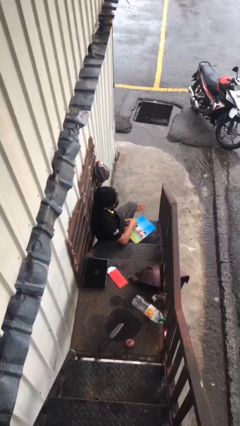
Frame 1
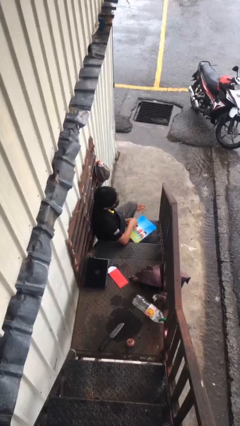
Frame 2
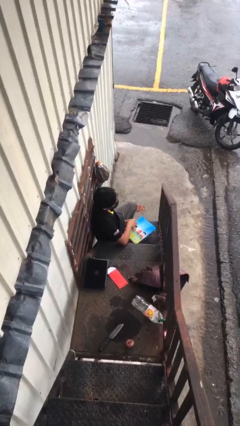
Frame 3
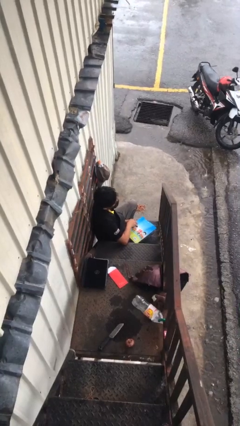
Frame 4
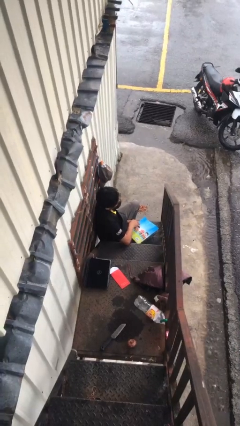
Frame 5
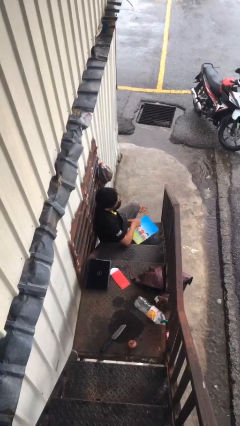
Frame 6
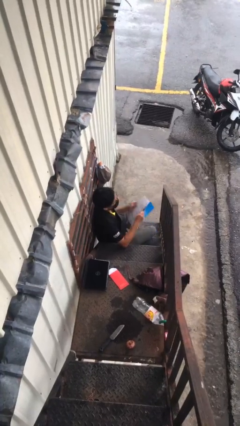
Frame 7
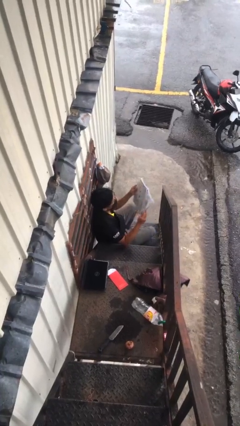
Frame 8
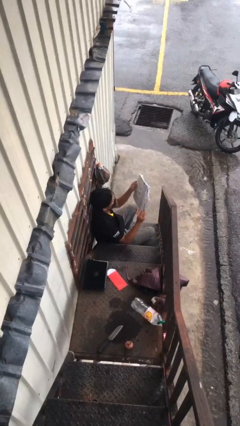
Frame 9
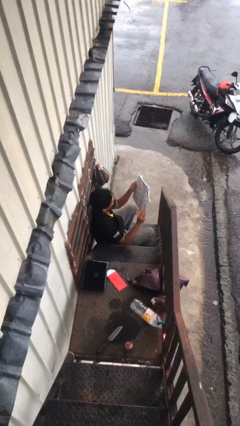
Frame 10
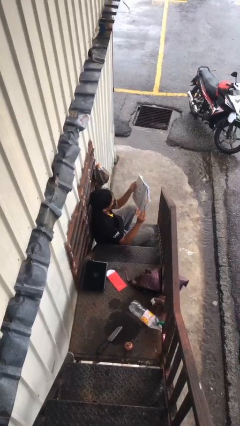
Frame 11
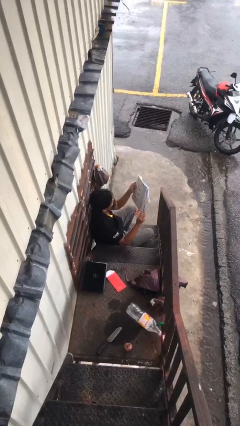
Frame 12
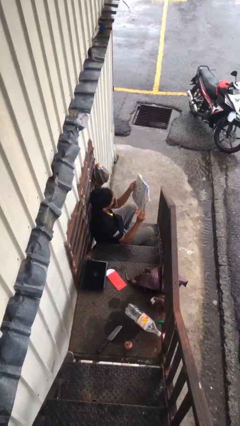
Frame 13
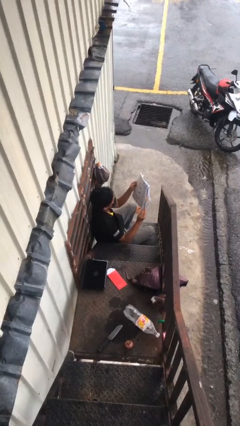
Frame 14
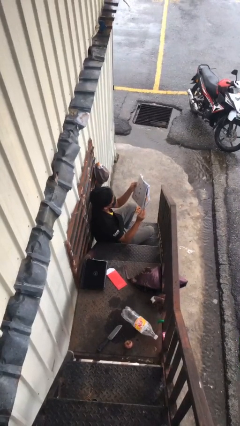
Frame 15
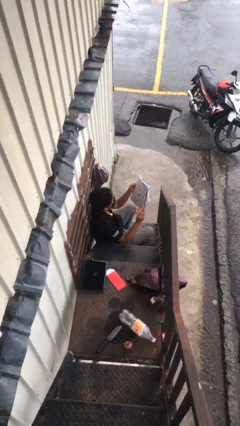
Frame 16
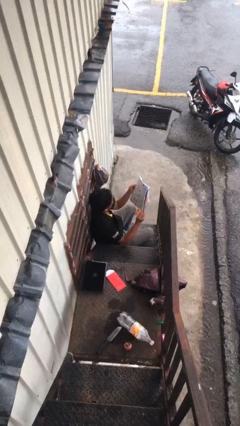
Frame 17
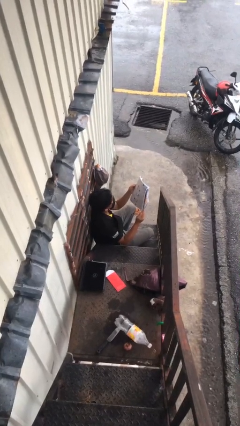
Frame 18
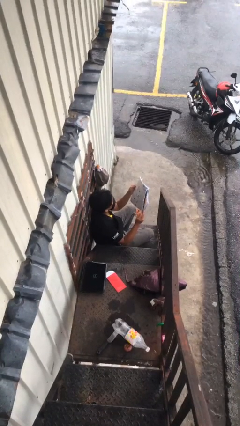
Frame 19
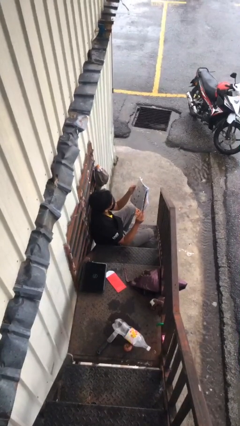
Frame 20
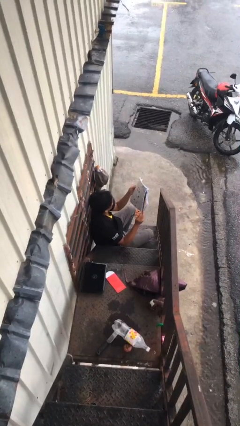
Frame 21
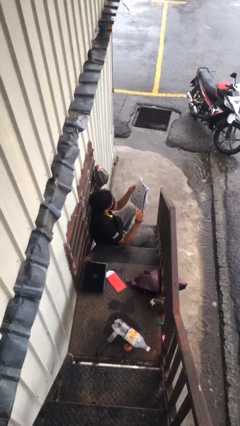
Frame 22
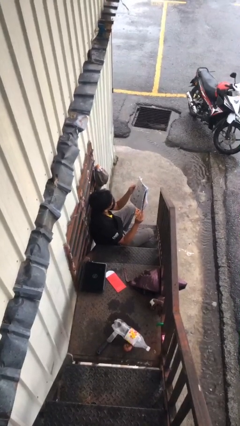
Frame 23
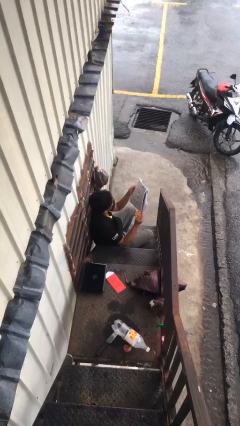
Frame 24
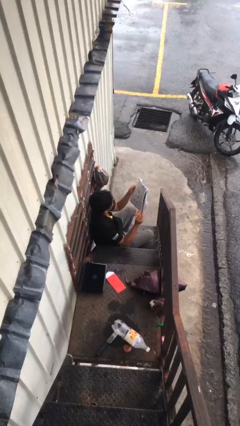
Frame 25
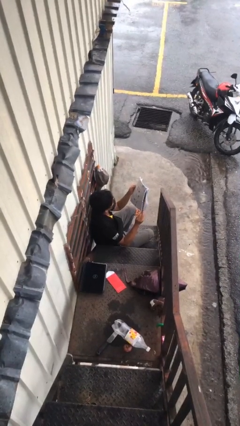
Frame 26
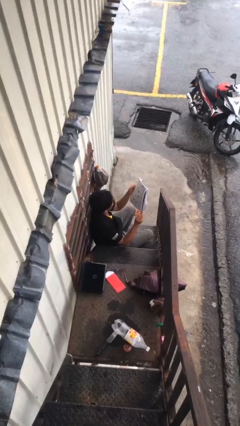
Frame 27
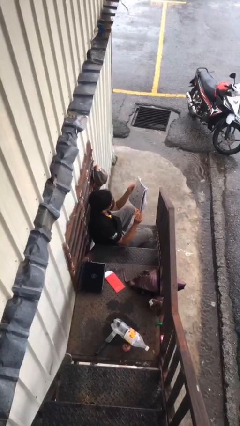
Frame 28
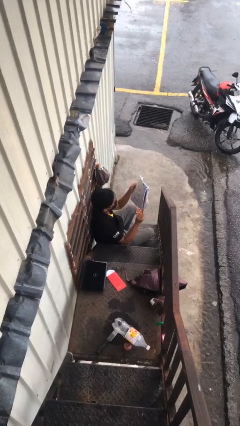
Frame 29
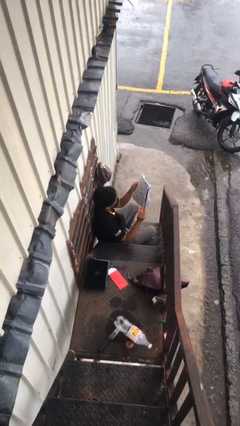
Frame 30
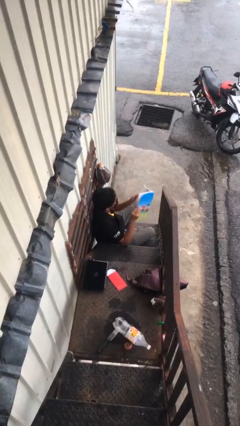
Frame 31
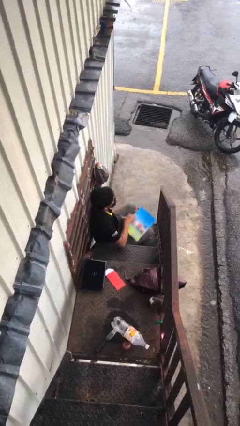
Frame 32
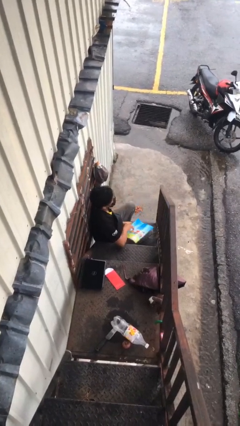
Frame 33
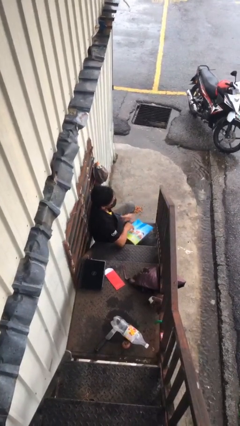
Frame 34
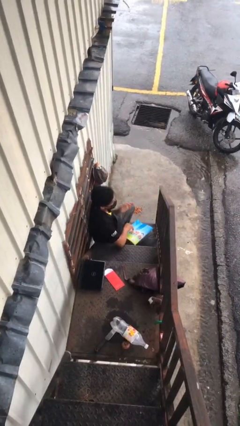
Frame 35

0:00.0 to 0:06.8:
person reads document

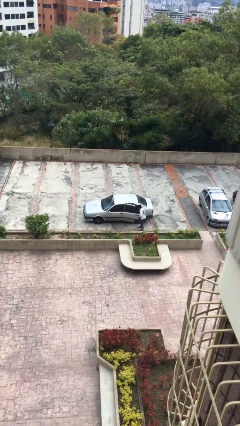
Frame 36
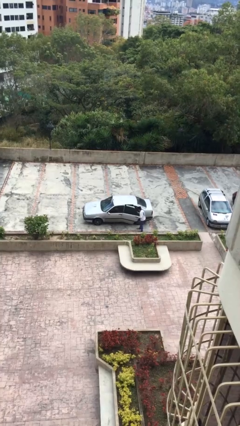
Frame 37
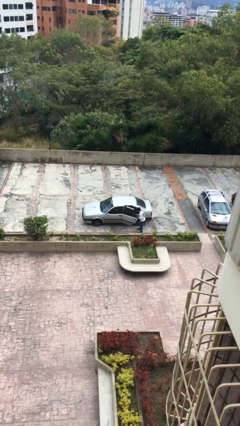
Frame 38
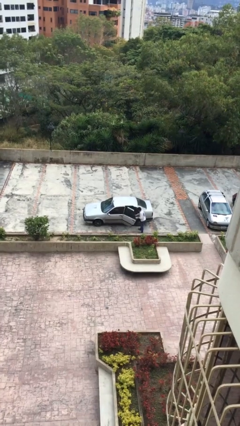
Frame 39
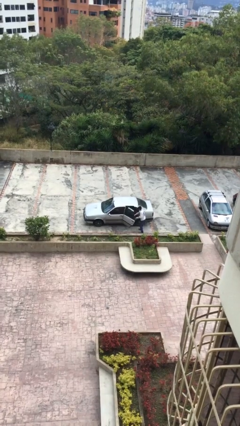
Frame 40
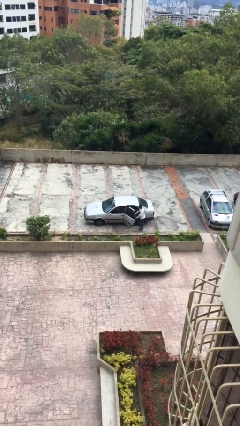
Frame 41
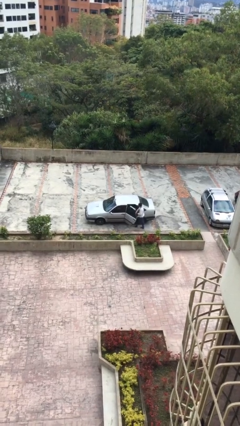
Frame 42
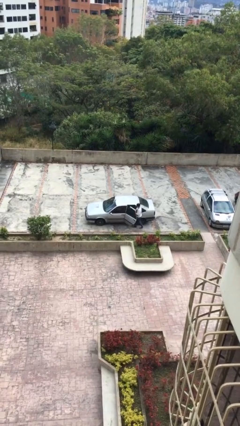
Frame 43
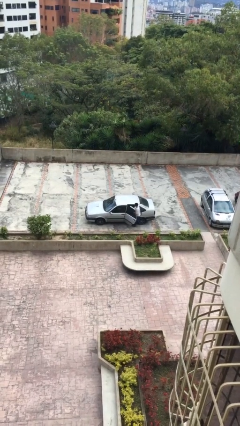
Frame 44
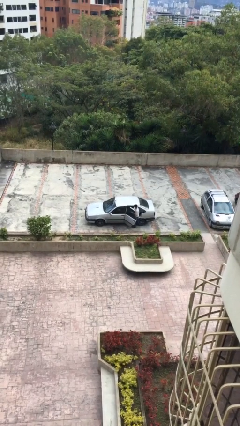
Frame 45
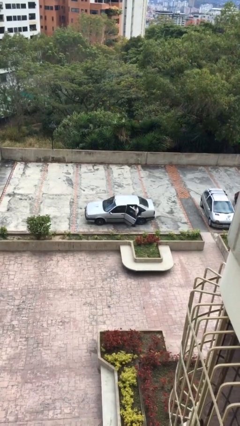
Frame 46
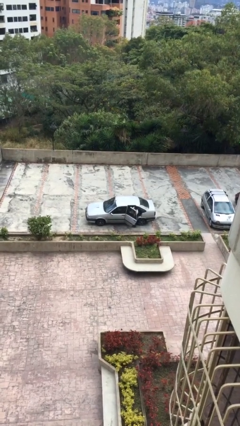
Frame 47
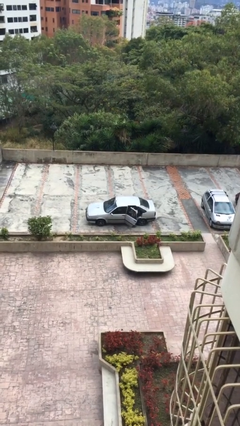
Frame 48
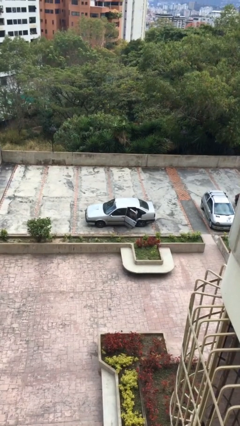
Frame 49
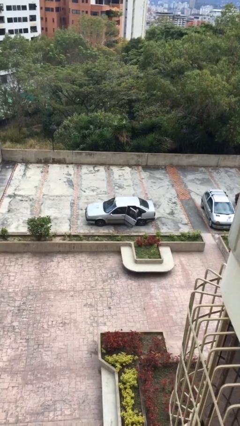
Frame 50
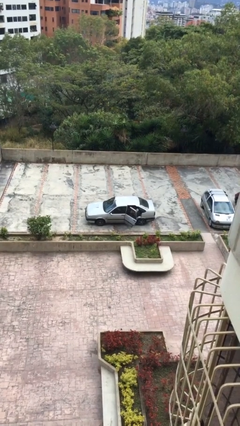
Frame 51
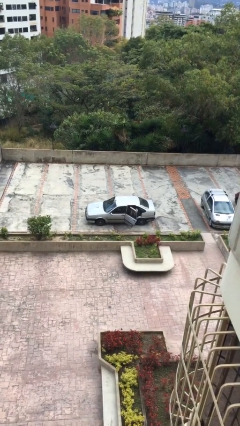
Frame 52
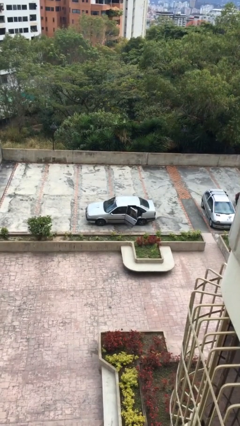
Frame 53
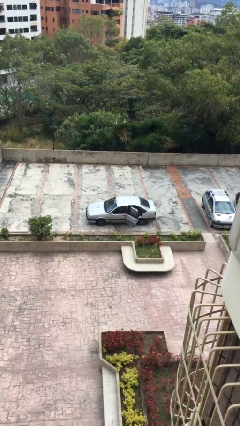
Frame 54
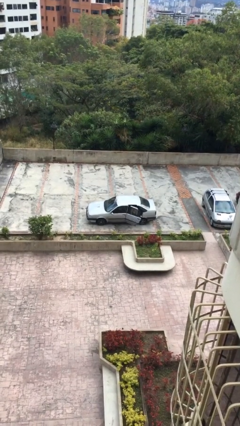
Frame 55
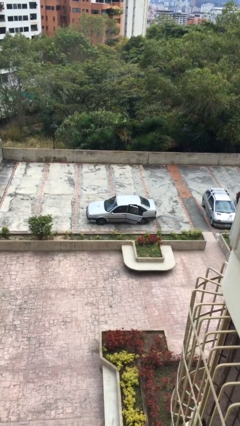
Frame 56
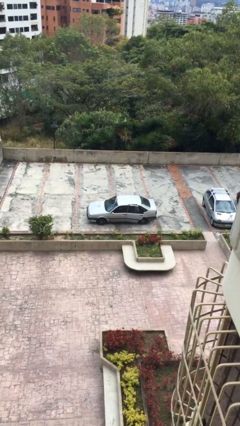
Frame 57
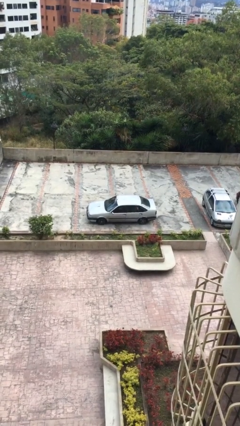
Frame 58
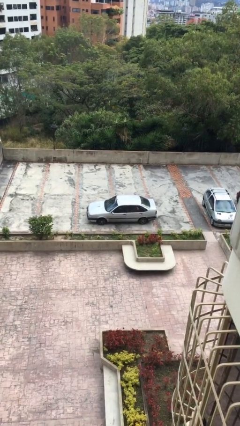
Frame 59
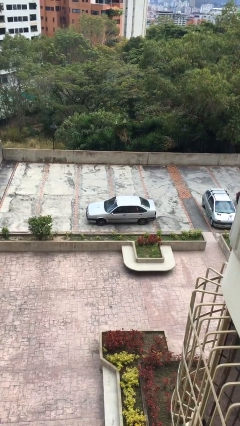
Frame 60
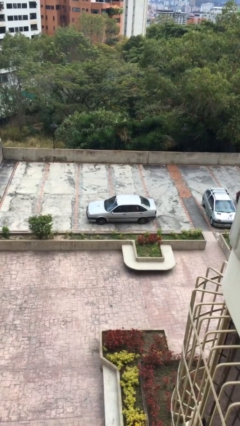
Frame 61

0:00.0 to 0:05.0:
car picks up person

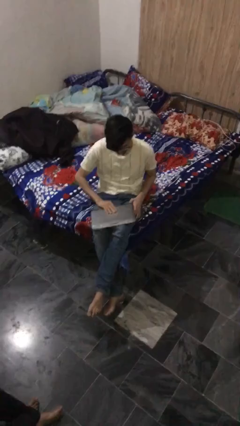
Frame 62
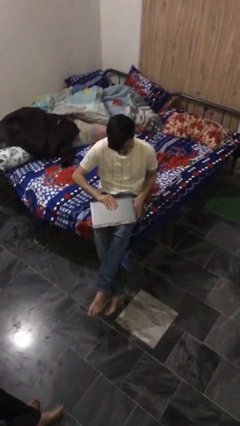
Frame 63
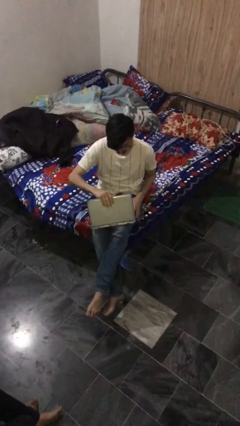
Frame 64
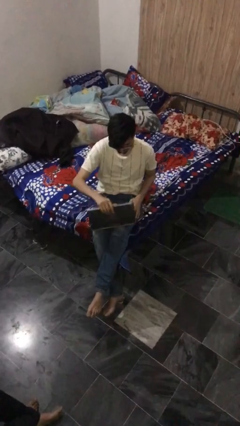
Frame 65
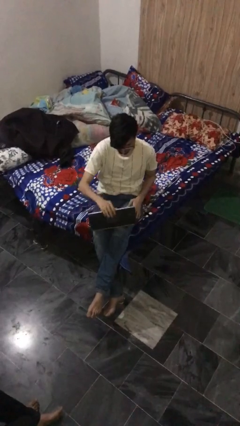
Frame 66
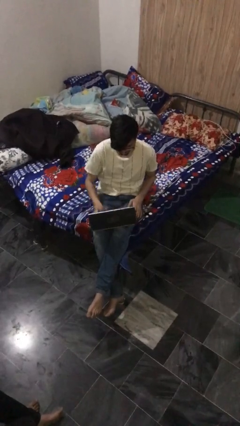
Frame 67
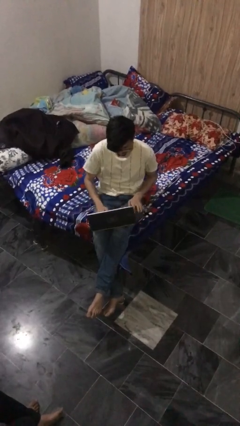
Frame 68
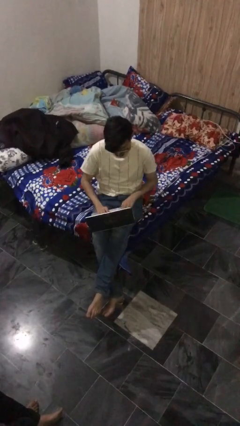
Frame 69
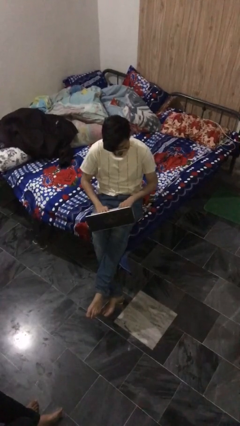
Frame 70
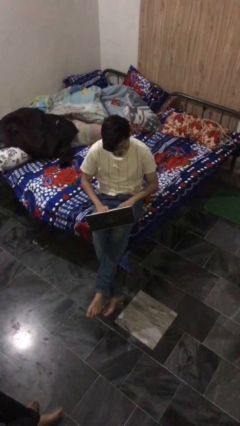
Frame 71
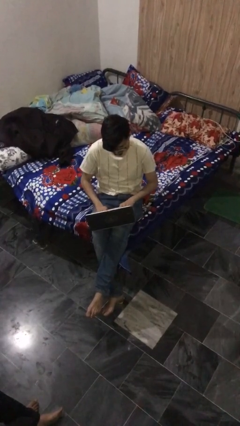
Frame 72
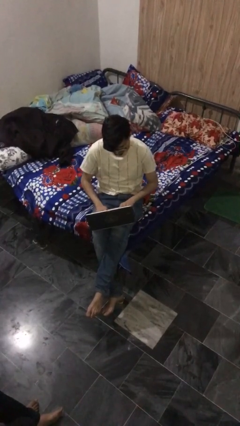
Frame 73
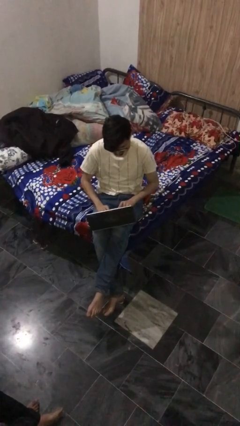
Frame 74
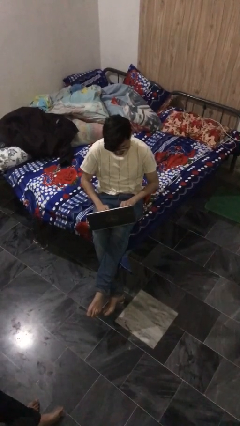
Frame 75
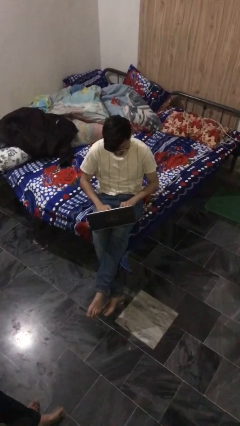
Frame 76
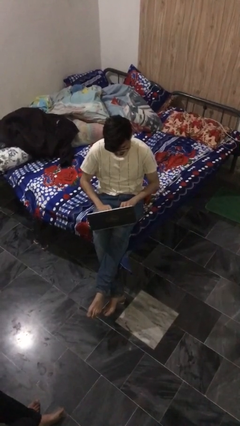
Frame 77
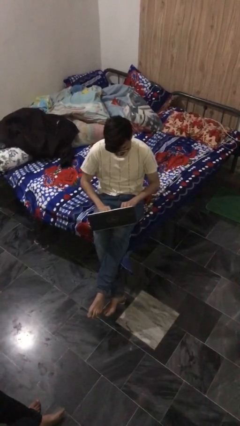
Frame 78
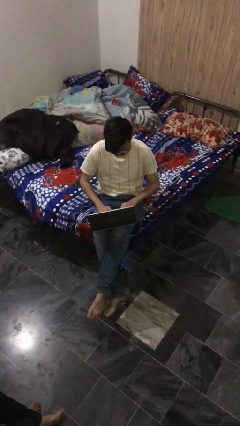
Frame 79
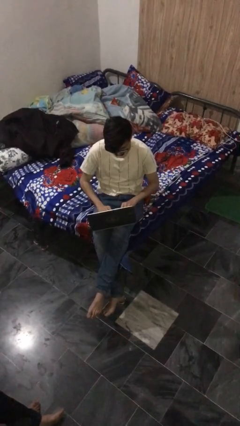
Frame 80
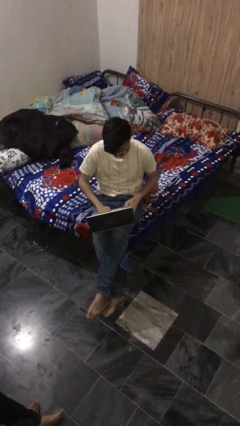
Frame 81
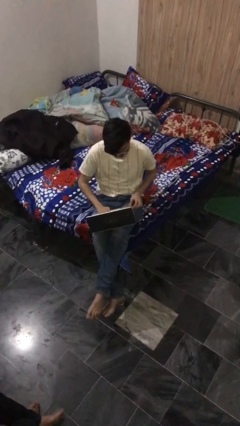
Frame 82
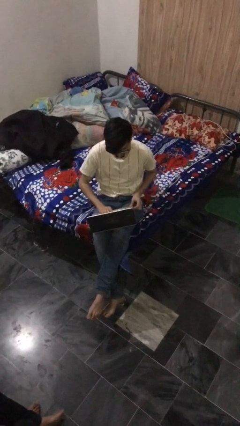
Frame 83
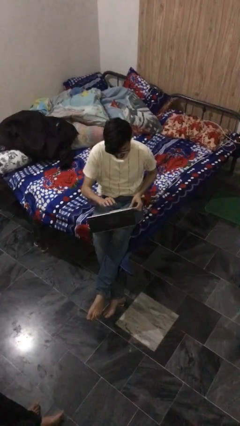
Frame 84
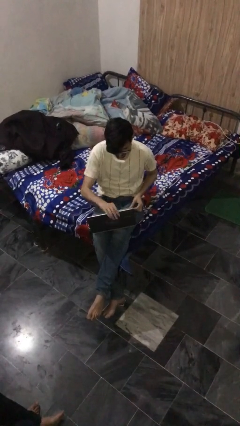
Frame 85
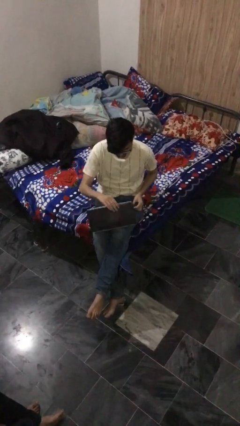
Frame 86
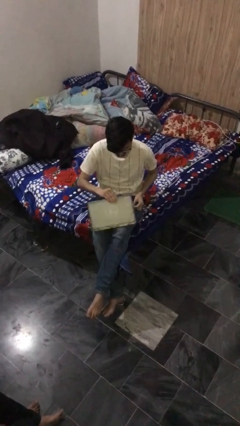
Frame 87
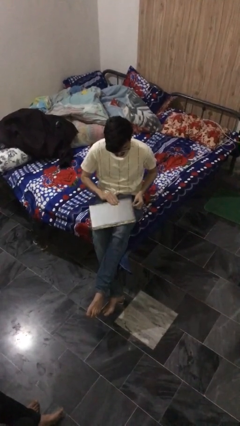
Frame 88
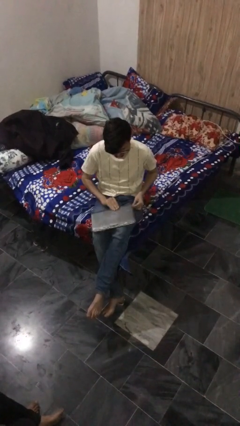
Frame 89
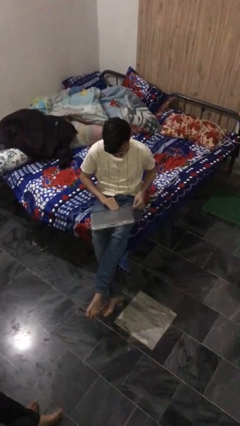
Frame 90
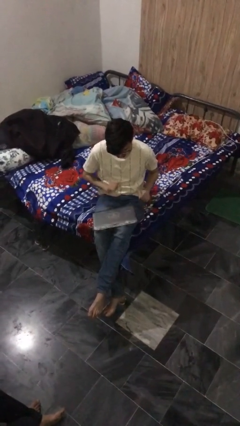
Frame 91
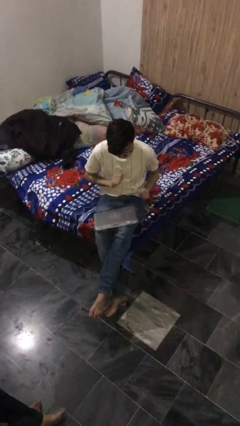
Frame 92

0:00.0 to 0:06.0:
person interacts with laptop
